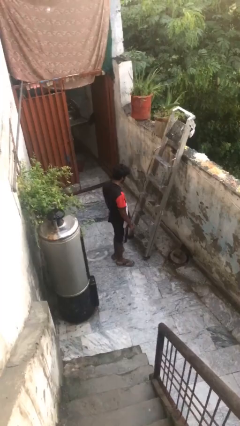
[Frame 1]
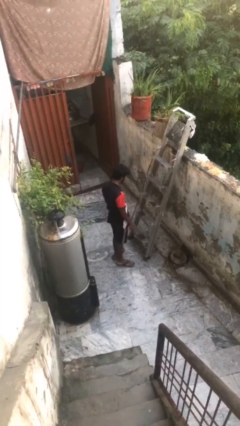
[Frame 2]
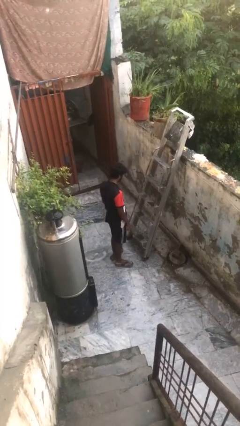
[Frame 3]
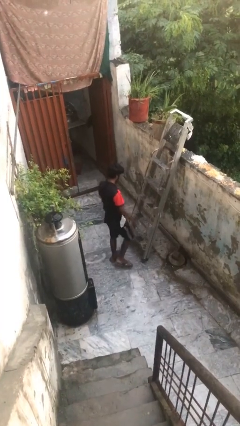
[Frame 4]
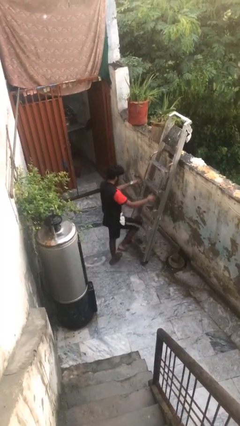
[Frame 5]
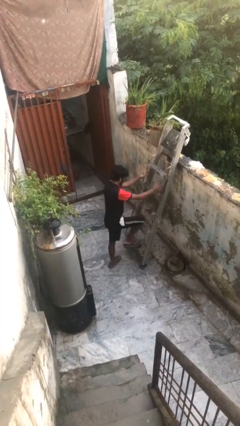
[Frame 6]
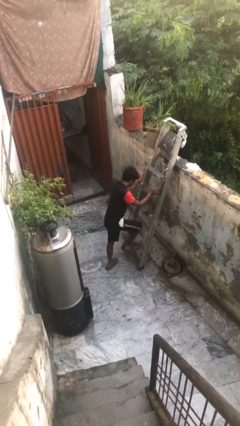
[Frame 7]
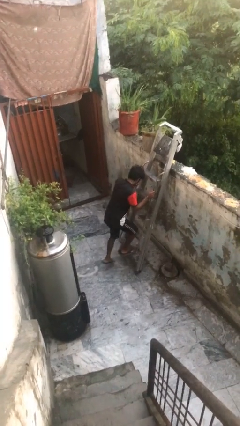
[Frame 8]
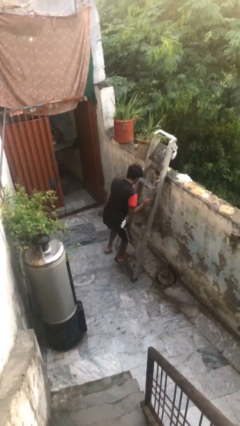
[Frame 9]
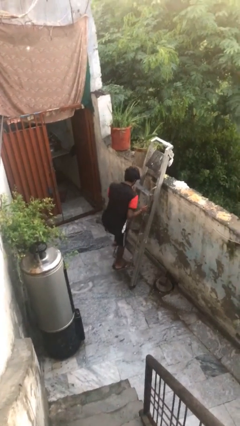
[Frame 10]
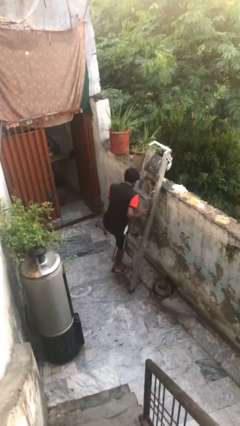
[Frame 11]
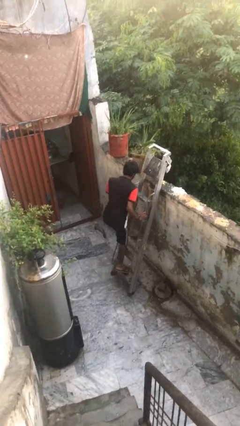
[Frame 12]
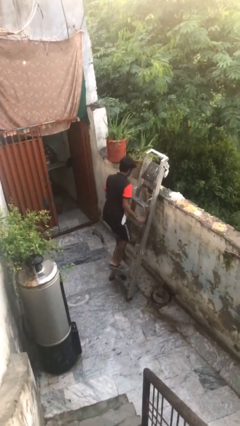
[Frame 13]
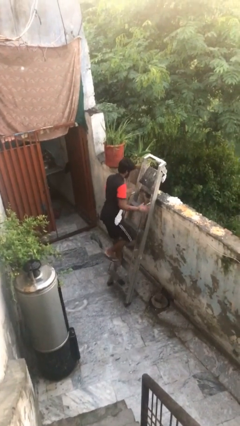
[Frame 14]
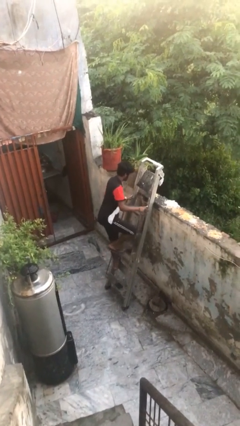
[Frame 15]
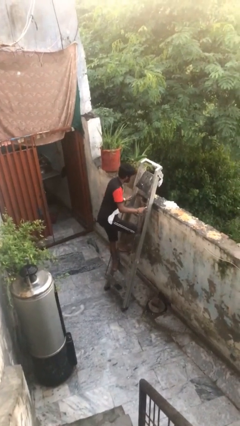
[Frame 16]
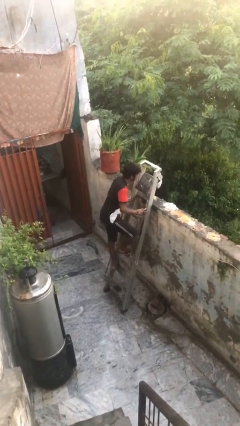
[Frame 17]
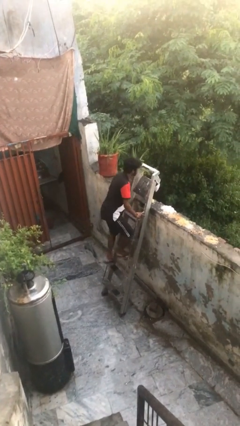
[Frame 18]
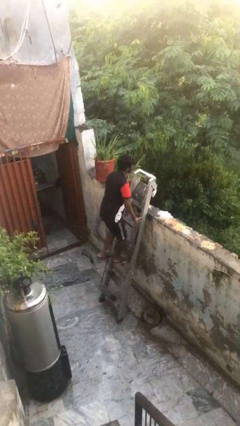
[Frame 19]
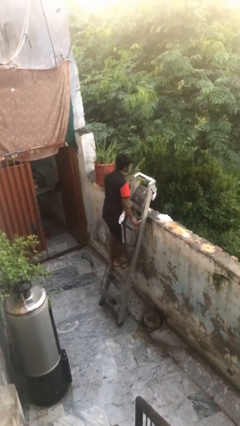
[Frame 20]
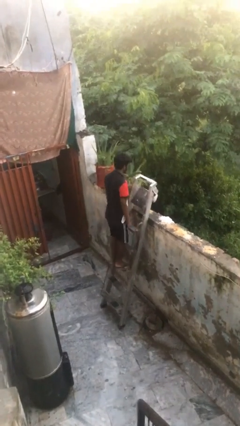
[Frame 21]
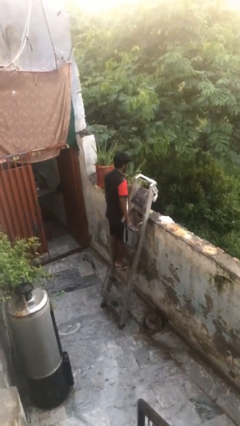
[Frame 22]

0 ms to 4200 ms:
person climbs up ladder

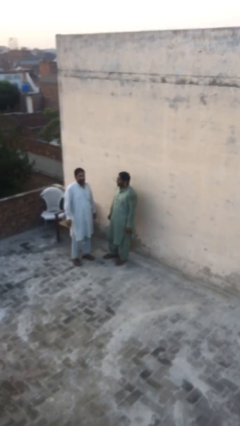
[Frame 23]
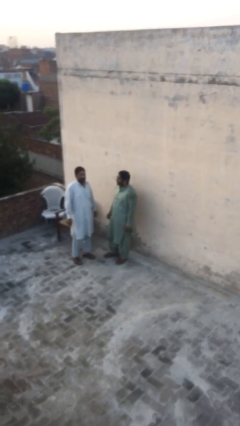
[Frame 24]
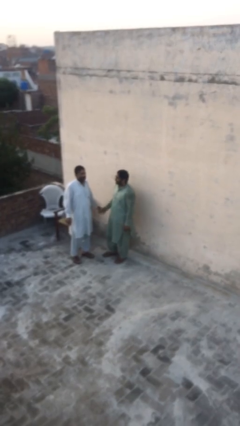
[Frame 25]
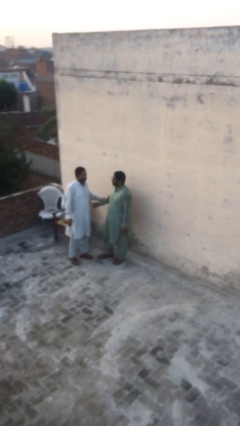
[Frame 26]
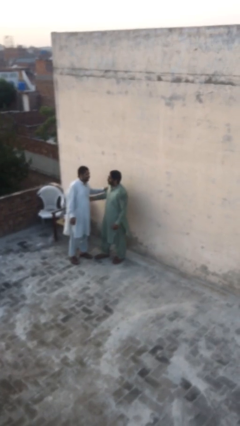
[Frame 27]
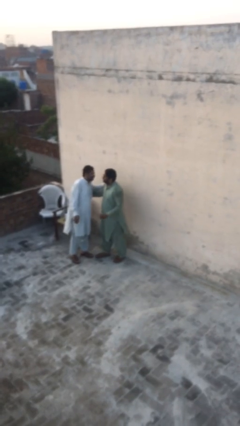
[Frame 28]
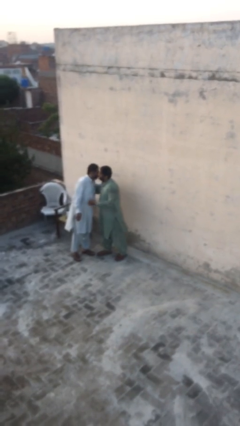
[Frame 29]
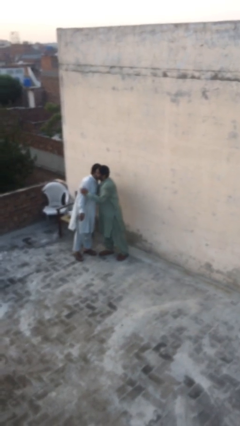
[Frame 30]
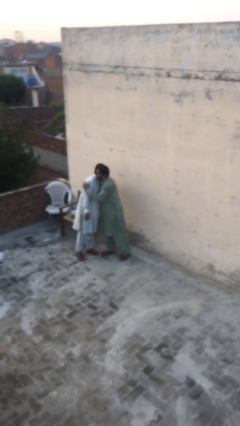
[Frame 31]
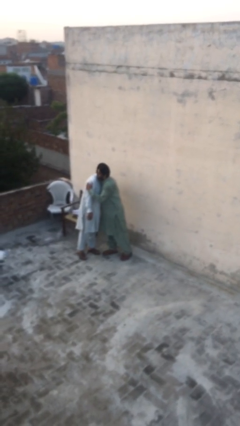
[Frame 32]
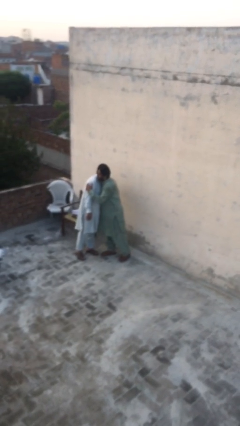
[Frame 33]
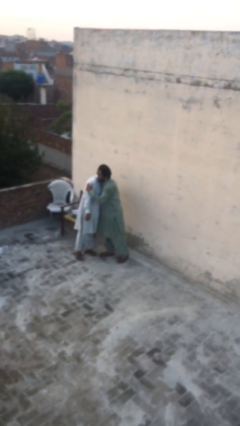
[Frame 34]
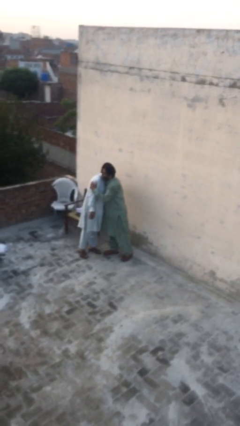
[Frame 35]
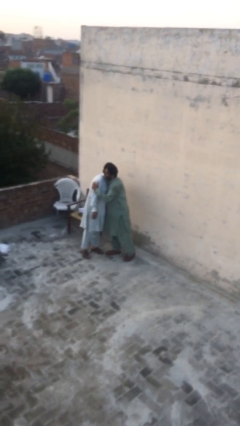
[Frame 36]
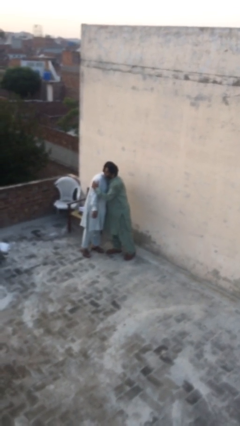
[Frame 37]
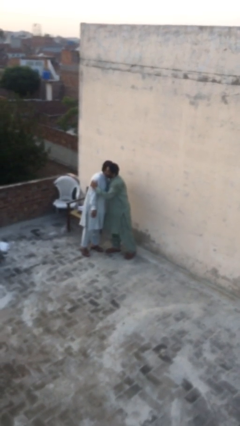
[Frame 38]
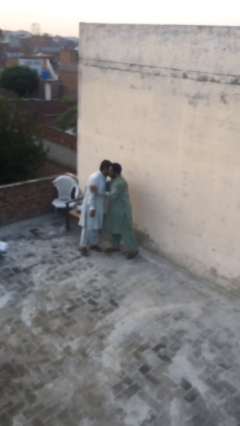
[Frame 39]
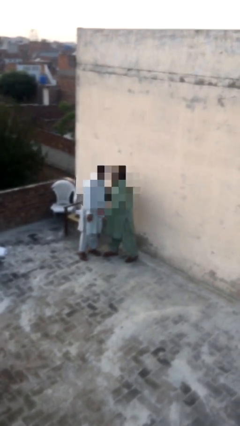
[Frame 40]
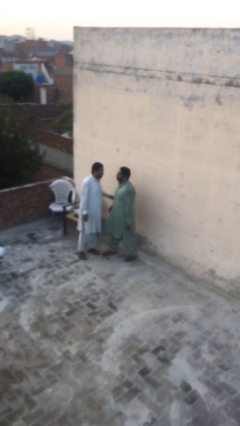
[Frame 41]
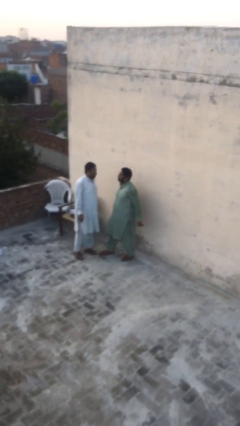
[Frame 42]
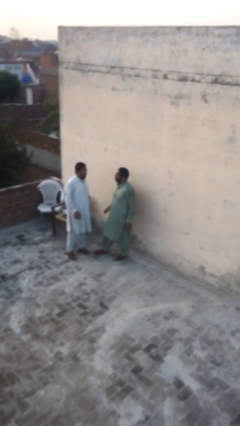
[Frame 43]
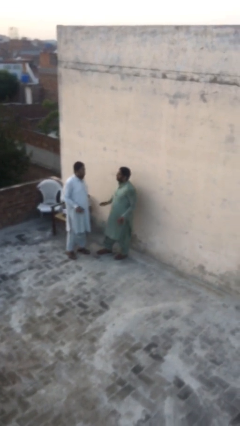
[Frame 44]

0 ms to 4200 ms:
person embraces person

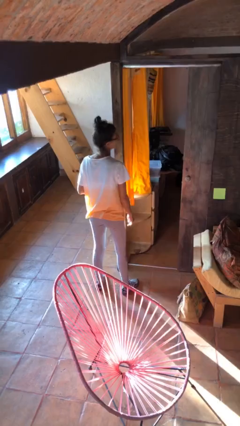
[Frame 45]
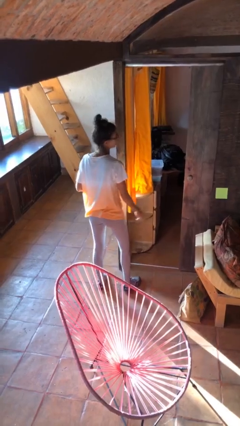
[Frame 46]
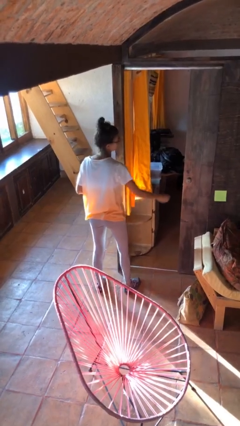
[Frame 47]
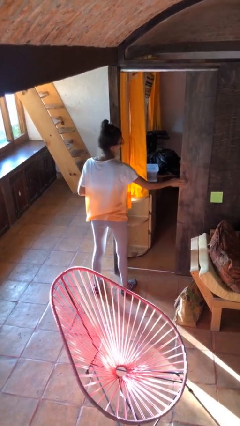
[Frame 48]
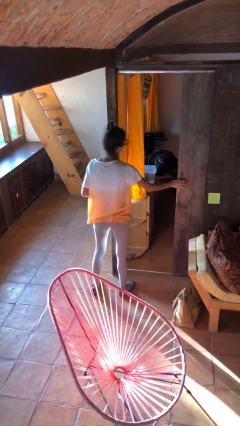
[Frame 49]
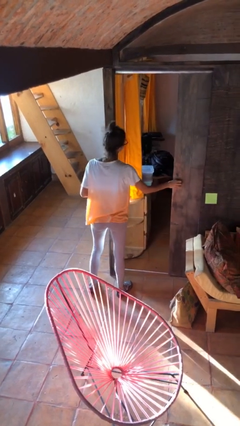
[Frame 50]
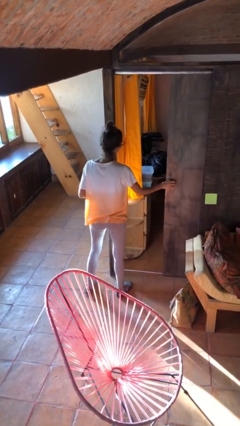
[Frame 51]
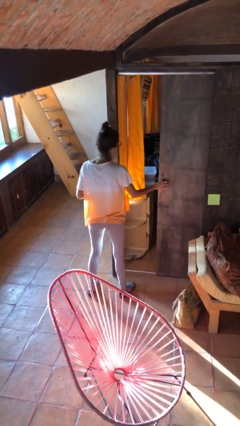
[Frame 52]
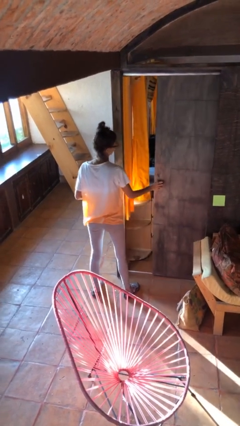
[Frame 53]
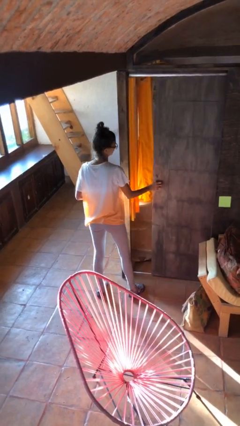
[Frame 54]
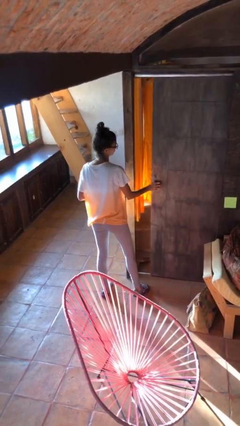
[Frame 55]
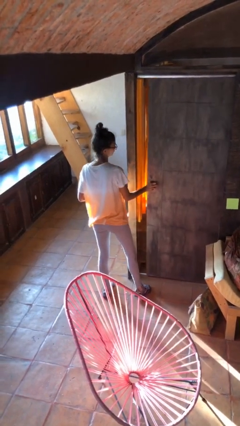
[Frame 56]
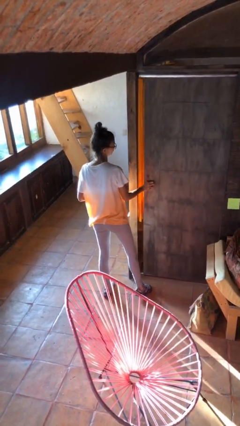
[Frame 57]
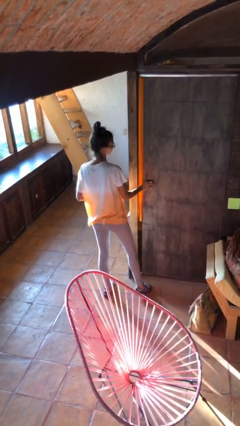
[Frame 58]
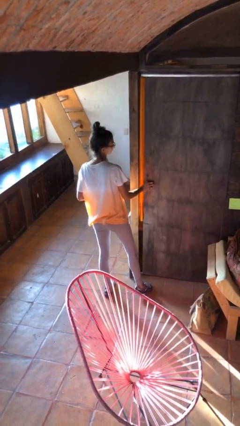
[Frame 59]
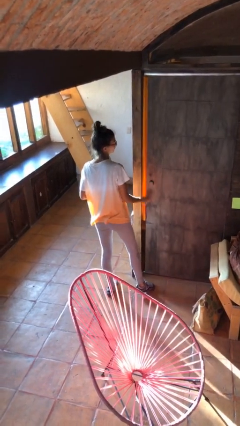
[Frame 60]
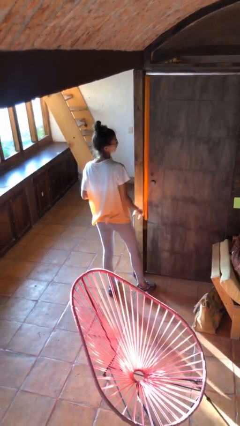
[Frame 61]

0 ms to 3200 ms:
person closes sliding door

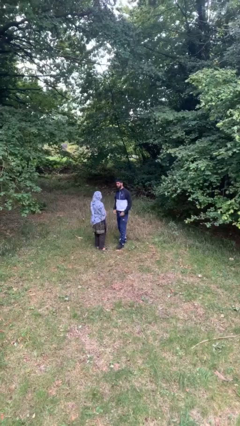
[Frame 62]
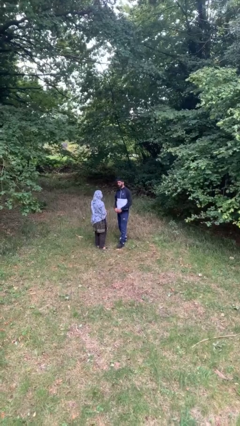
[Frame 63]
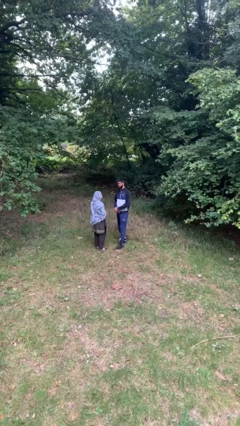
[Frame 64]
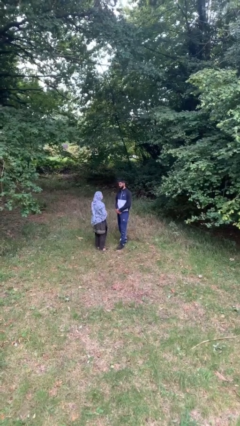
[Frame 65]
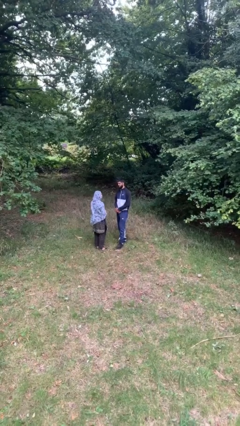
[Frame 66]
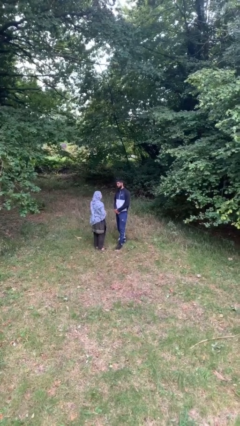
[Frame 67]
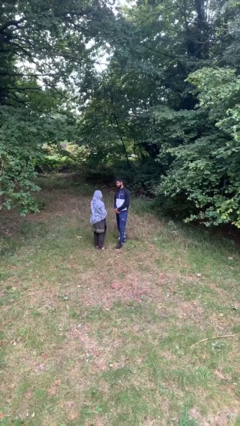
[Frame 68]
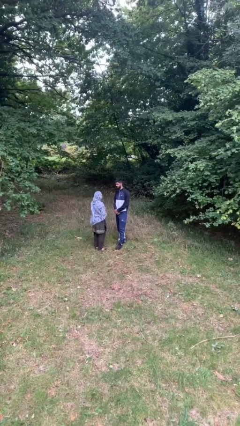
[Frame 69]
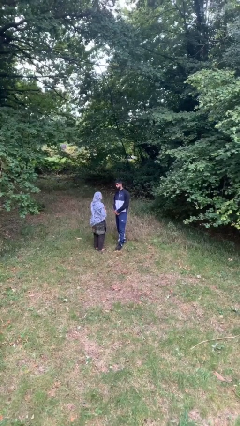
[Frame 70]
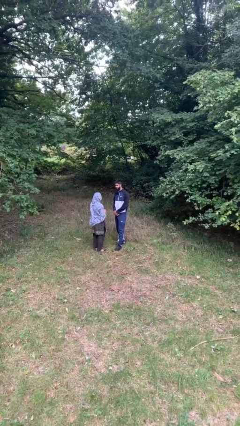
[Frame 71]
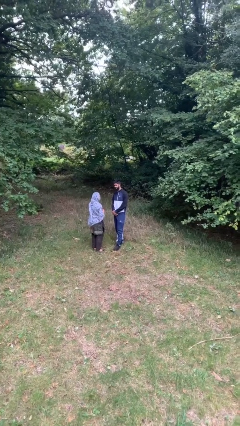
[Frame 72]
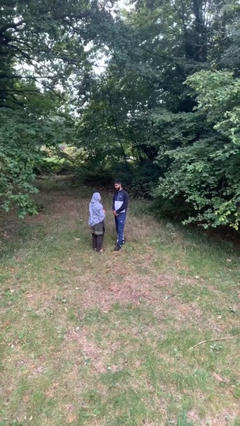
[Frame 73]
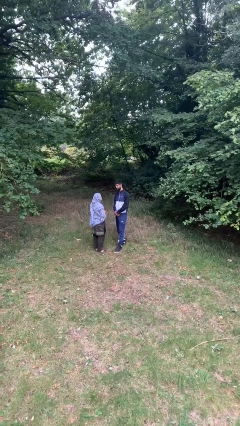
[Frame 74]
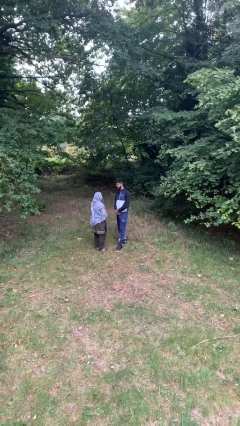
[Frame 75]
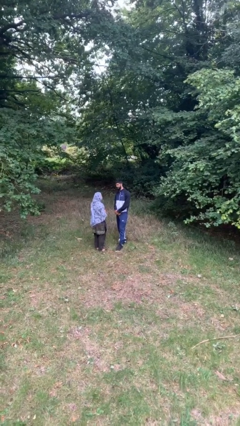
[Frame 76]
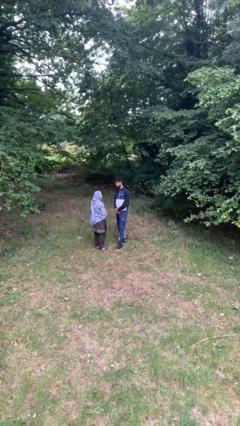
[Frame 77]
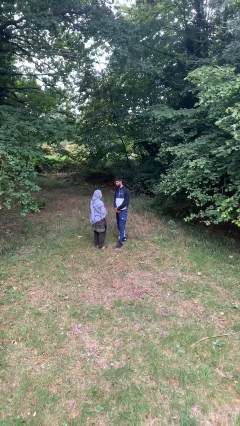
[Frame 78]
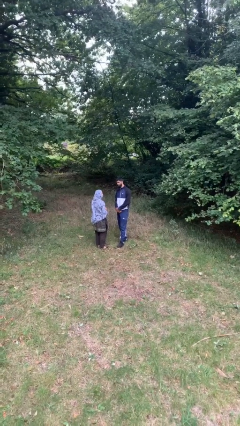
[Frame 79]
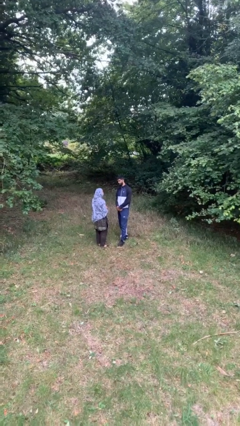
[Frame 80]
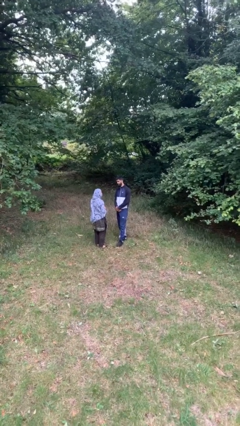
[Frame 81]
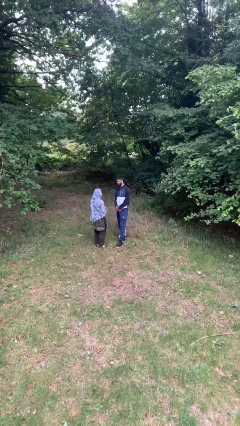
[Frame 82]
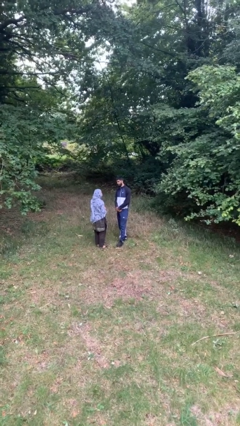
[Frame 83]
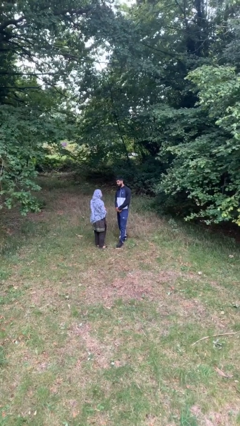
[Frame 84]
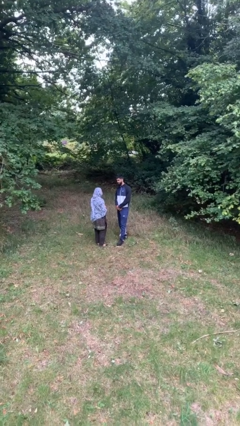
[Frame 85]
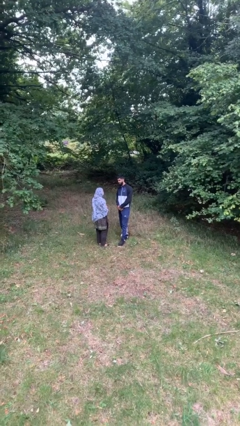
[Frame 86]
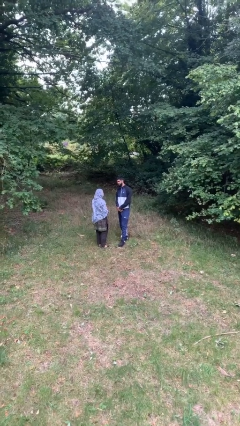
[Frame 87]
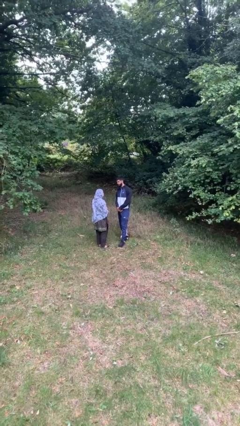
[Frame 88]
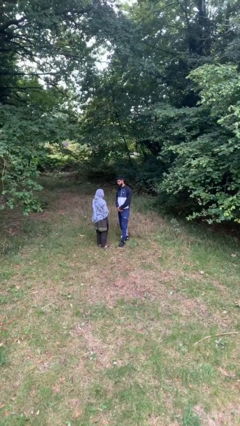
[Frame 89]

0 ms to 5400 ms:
person talks to person

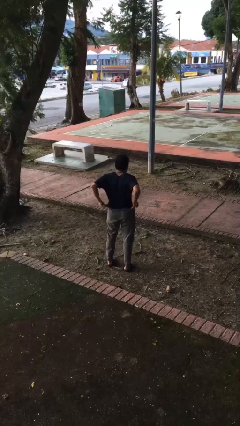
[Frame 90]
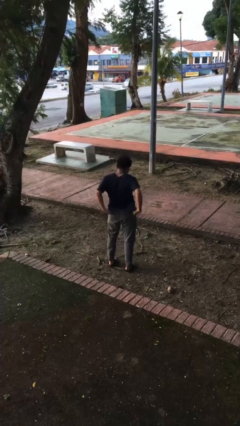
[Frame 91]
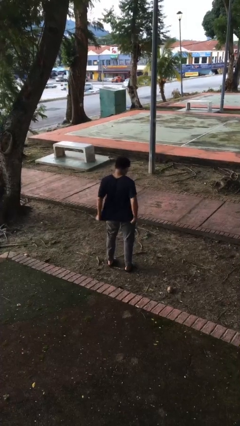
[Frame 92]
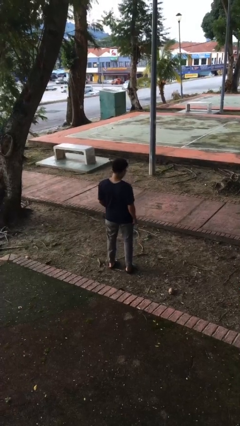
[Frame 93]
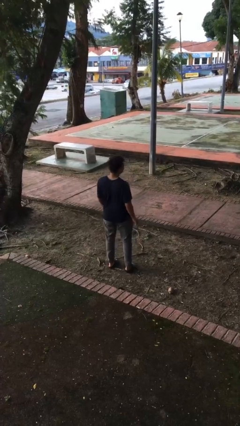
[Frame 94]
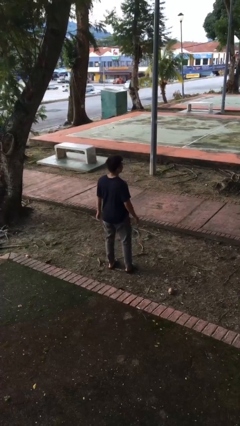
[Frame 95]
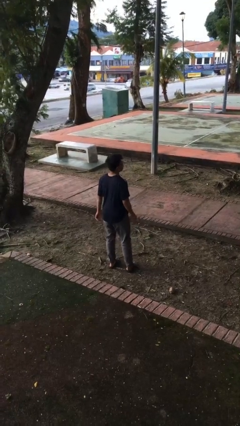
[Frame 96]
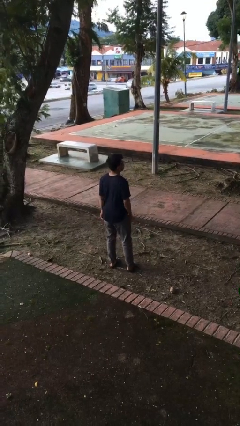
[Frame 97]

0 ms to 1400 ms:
person untucks shirt
